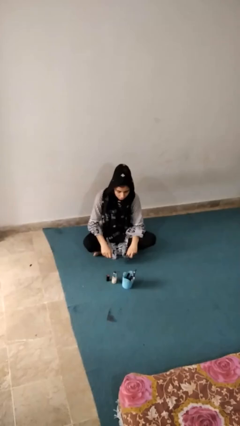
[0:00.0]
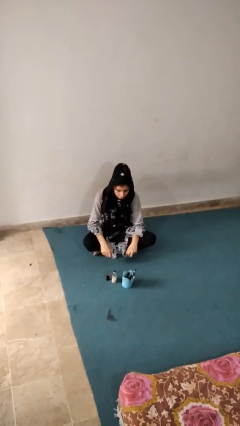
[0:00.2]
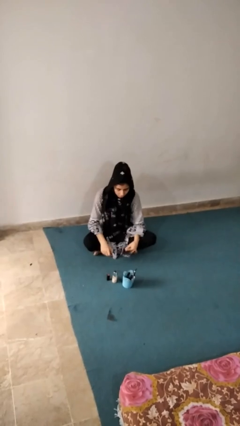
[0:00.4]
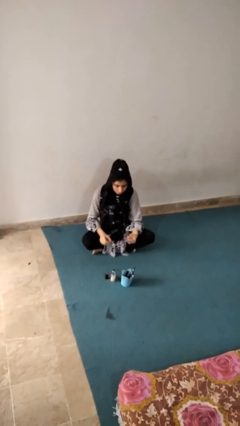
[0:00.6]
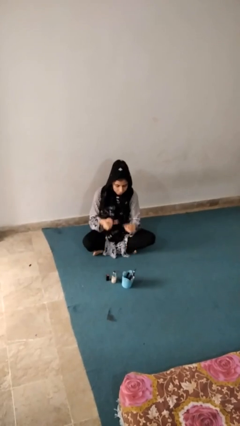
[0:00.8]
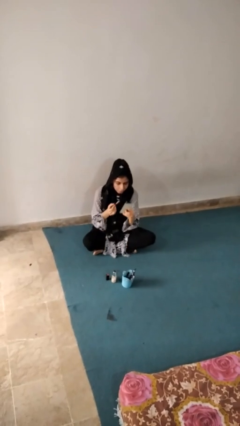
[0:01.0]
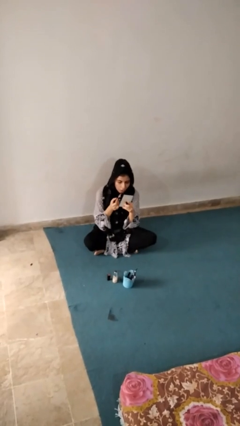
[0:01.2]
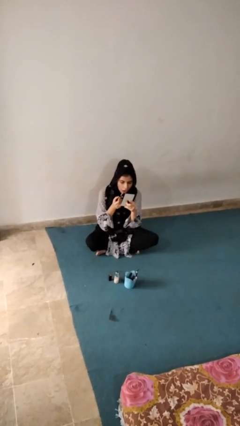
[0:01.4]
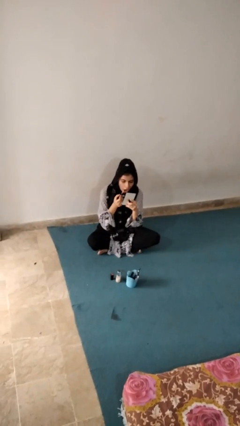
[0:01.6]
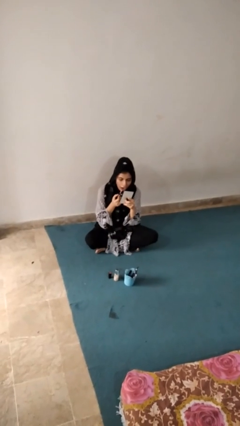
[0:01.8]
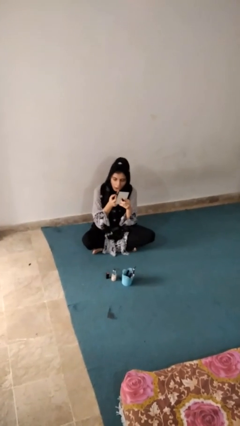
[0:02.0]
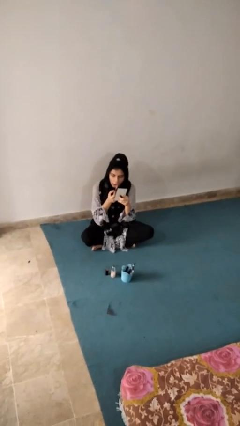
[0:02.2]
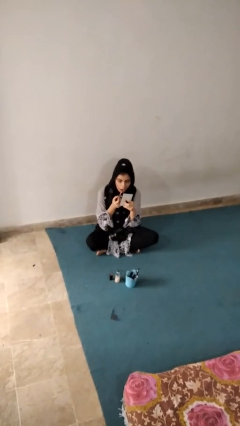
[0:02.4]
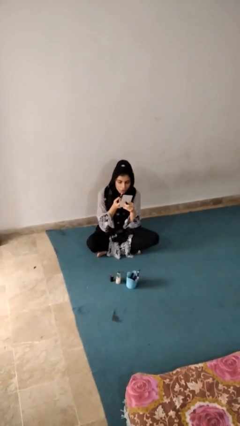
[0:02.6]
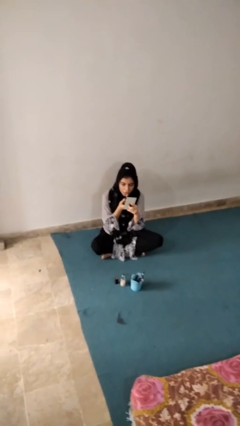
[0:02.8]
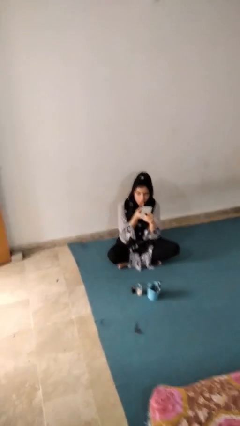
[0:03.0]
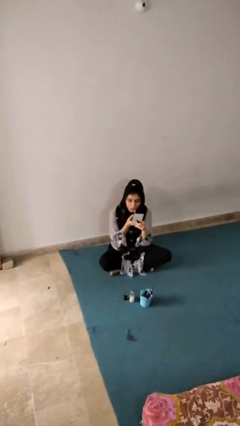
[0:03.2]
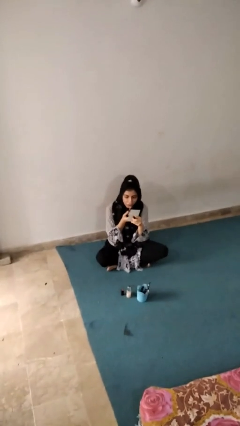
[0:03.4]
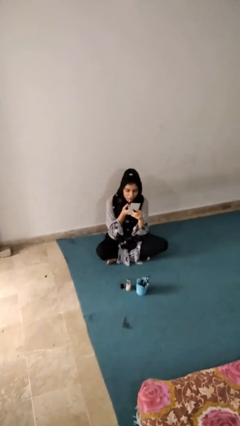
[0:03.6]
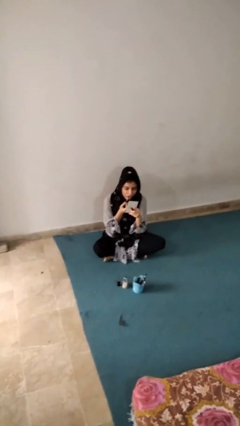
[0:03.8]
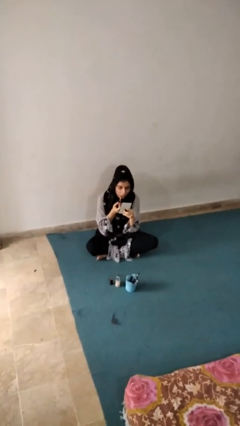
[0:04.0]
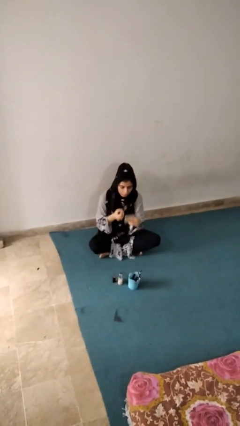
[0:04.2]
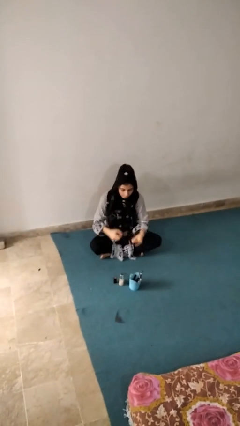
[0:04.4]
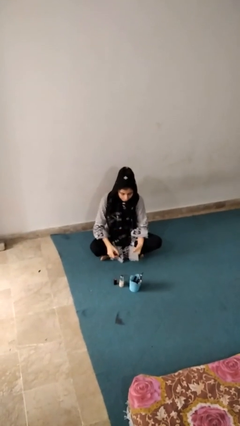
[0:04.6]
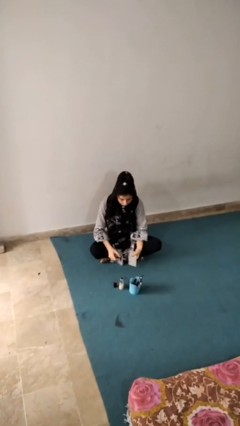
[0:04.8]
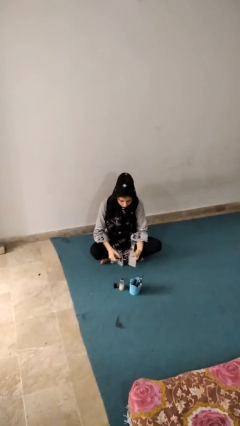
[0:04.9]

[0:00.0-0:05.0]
person applies lip makeup

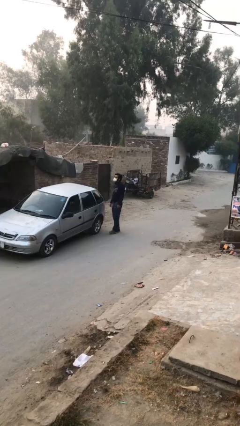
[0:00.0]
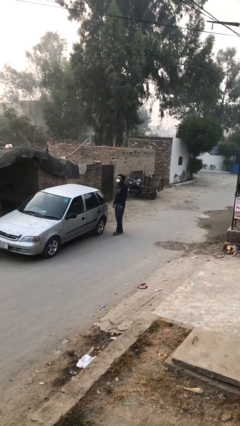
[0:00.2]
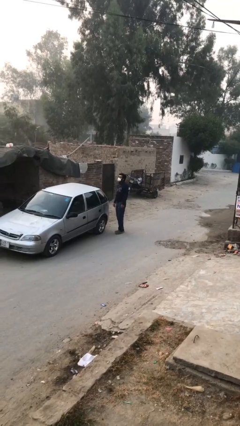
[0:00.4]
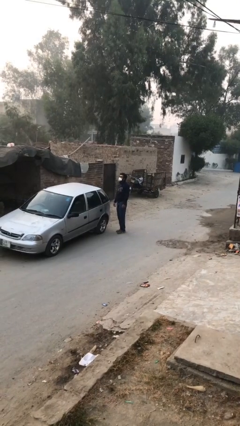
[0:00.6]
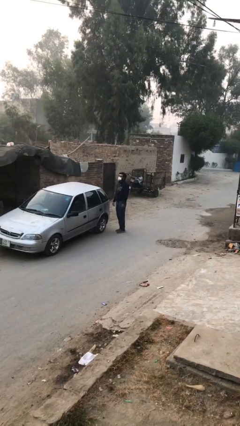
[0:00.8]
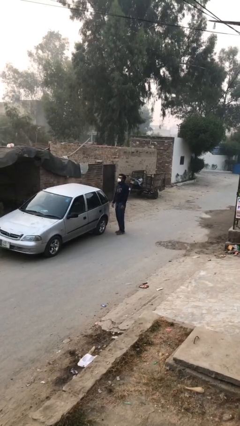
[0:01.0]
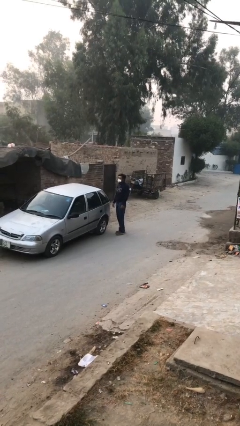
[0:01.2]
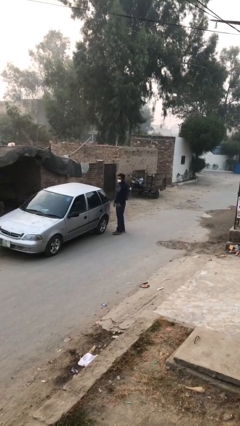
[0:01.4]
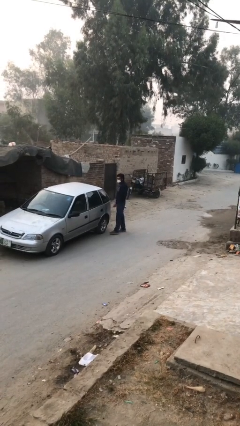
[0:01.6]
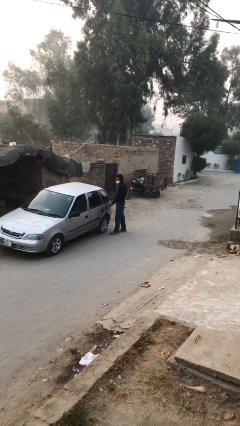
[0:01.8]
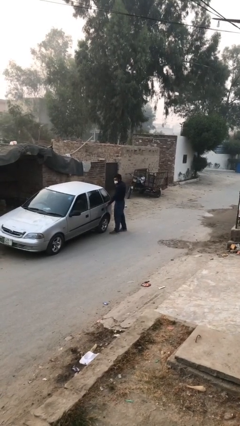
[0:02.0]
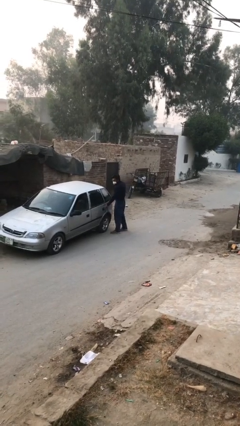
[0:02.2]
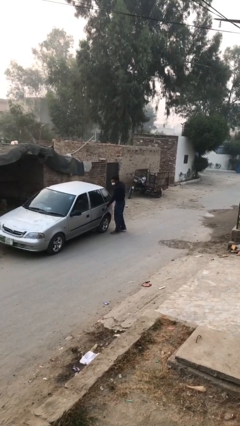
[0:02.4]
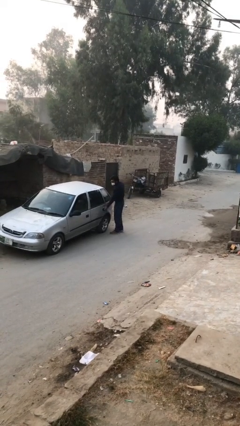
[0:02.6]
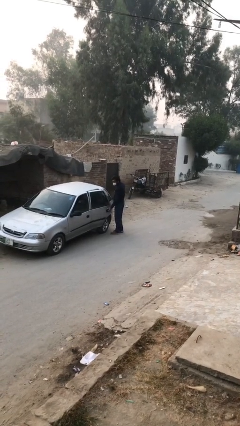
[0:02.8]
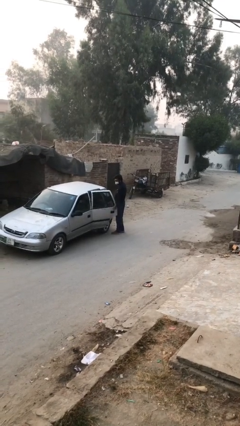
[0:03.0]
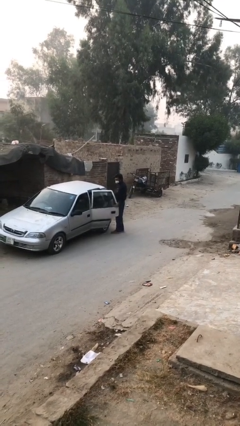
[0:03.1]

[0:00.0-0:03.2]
person opens car door

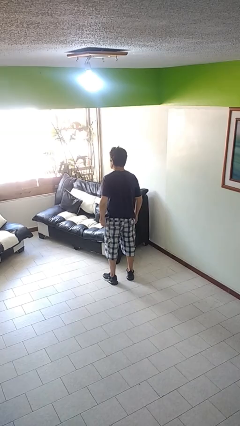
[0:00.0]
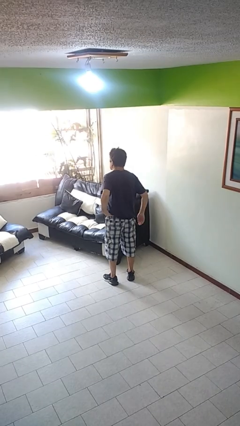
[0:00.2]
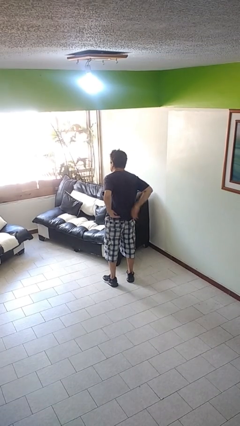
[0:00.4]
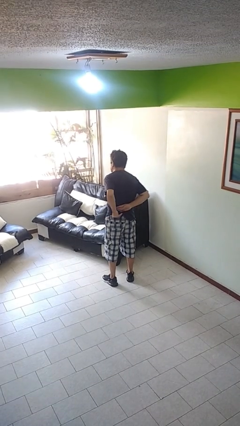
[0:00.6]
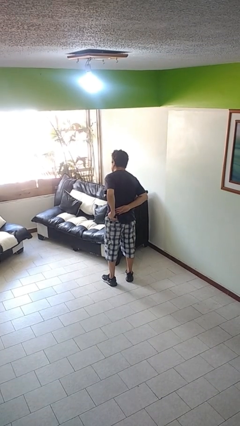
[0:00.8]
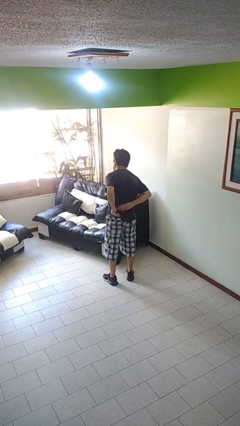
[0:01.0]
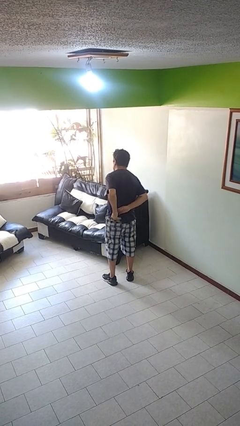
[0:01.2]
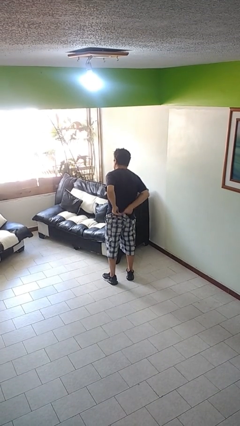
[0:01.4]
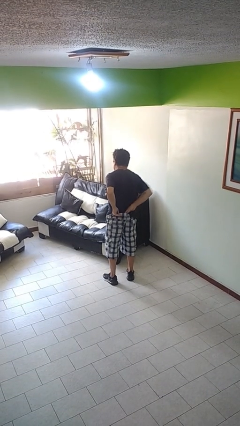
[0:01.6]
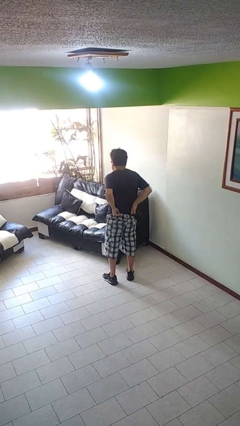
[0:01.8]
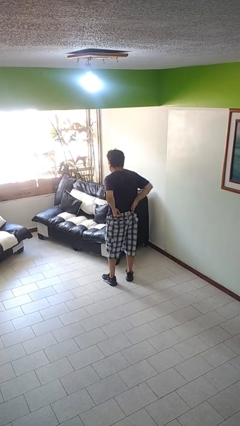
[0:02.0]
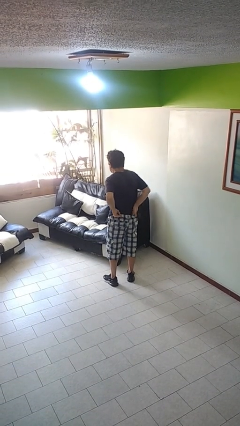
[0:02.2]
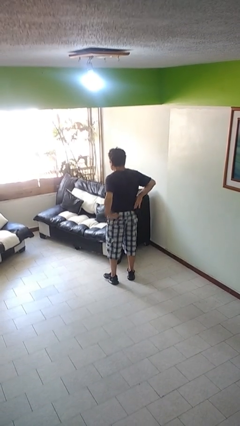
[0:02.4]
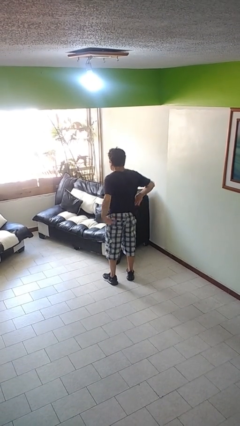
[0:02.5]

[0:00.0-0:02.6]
person tucks in shirt

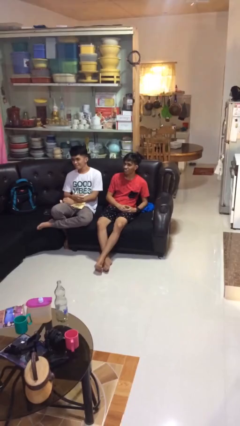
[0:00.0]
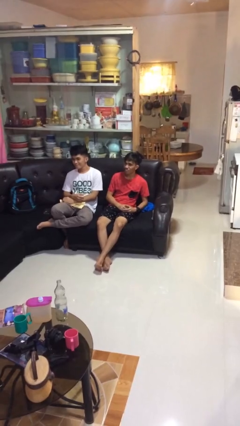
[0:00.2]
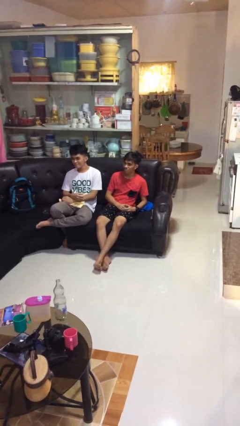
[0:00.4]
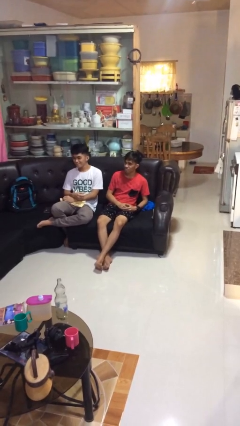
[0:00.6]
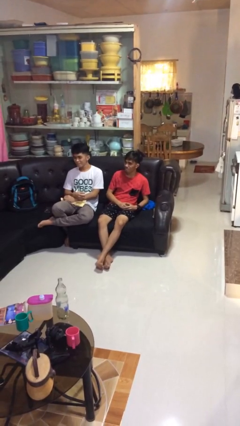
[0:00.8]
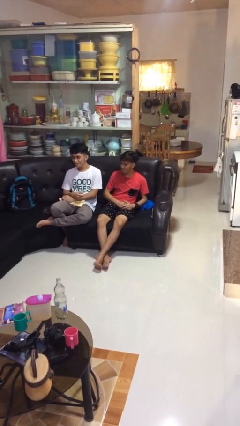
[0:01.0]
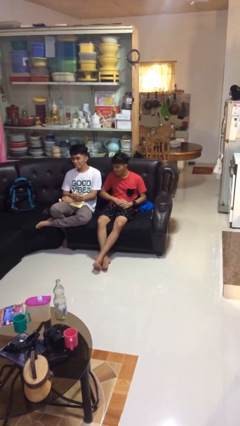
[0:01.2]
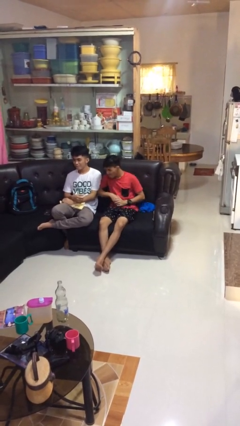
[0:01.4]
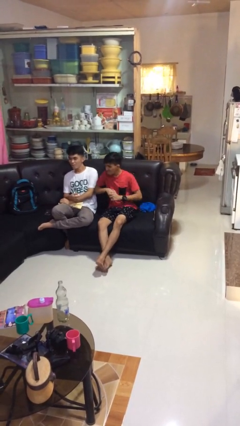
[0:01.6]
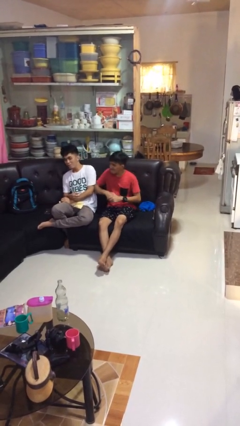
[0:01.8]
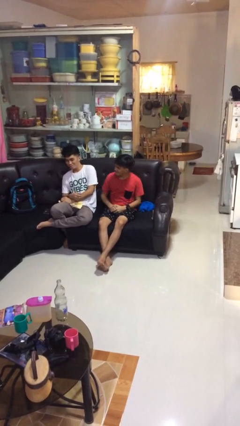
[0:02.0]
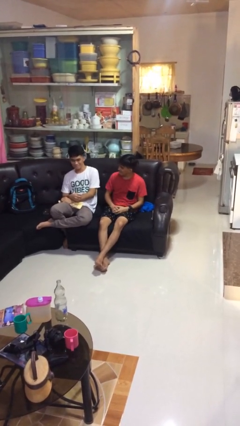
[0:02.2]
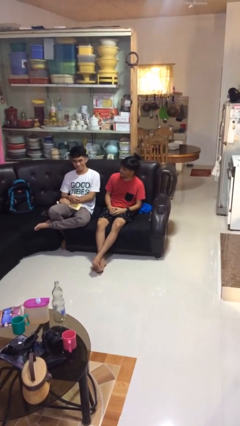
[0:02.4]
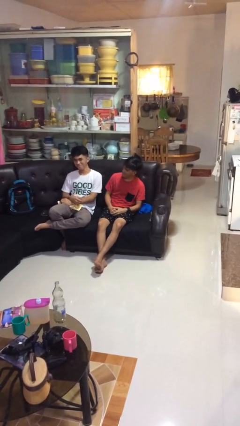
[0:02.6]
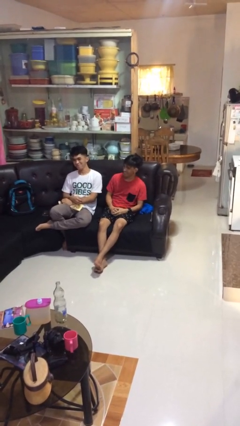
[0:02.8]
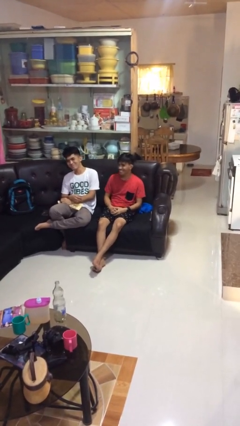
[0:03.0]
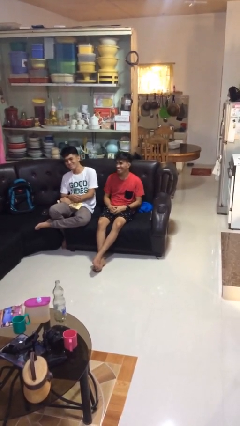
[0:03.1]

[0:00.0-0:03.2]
person nudges person with elbow

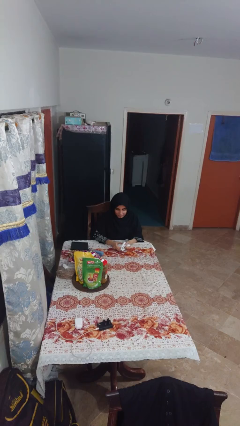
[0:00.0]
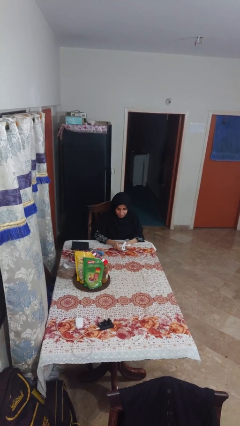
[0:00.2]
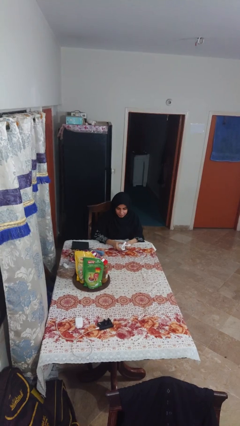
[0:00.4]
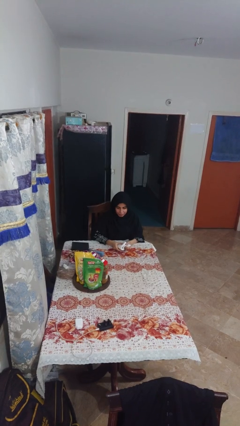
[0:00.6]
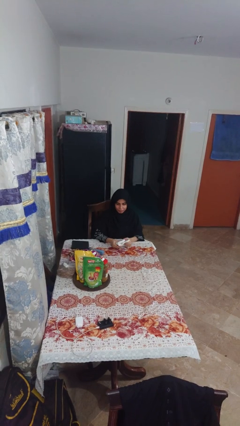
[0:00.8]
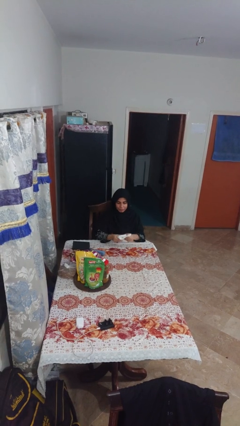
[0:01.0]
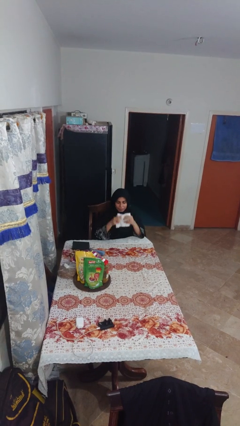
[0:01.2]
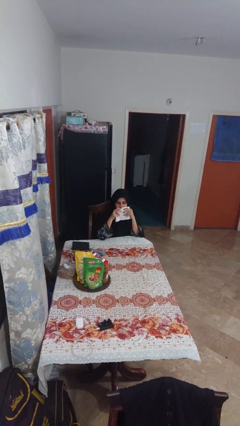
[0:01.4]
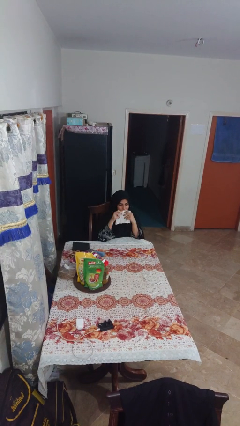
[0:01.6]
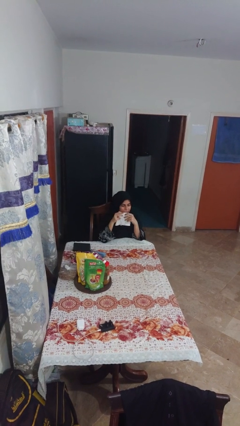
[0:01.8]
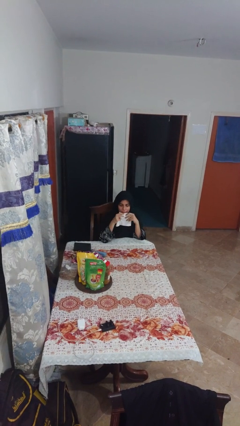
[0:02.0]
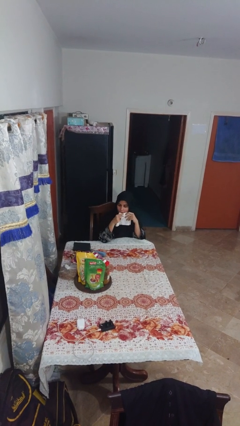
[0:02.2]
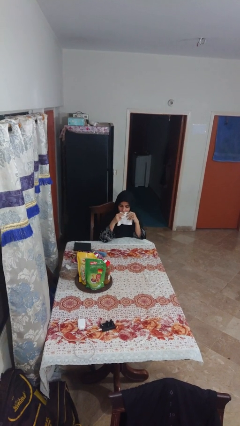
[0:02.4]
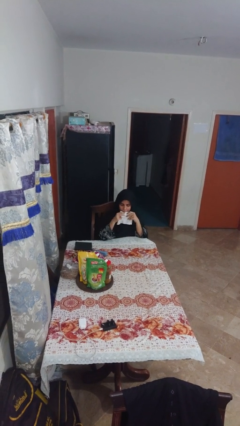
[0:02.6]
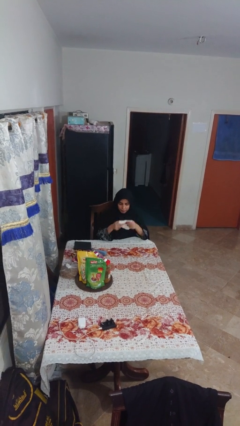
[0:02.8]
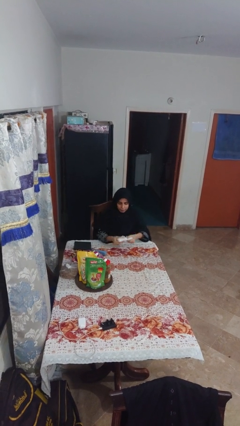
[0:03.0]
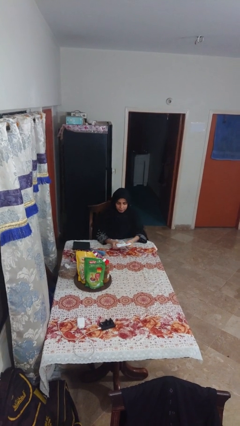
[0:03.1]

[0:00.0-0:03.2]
person wipes mouth with napkin

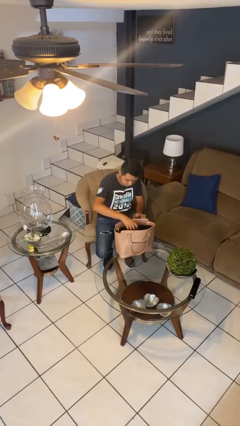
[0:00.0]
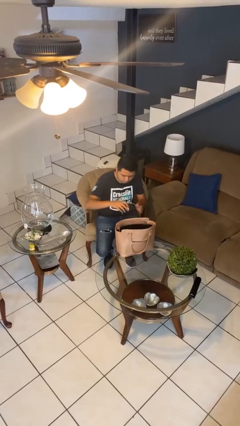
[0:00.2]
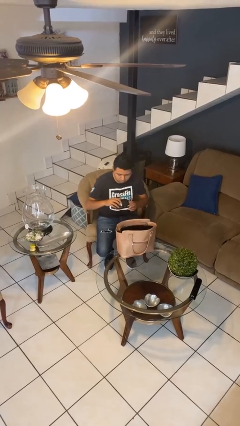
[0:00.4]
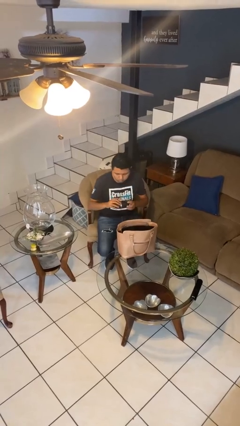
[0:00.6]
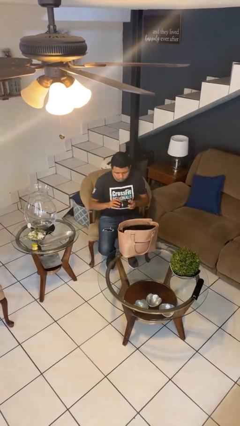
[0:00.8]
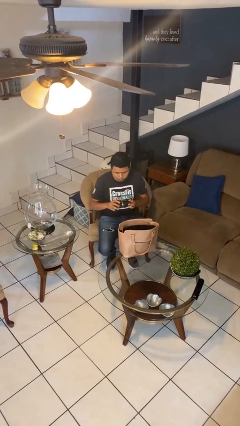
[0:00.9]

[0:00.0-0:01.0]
person takes object from purse
